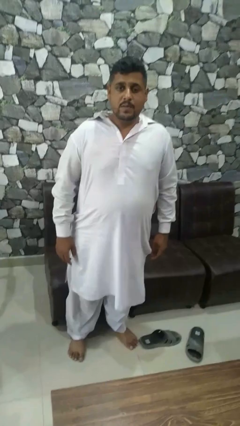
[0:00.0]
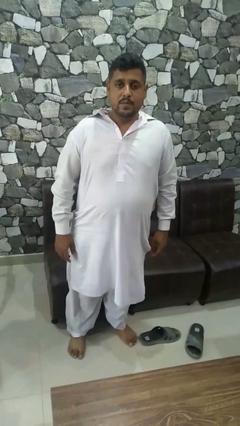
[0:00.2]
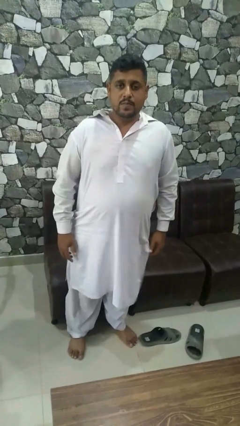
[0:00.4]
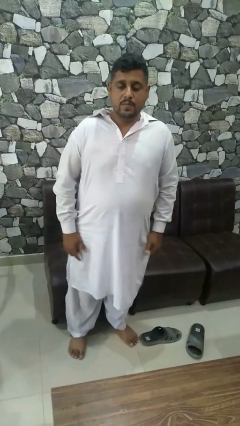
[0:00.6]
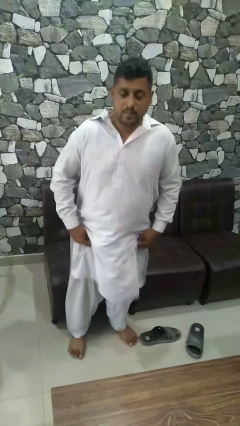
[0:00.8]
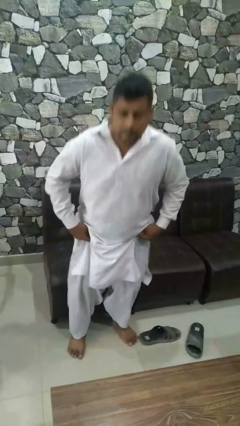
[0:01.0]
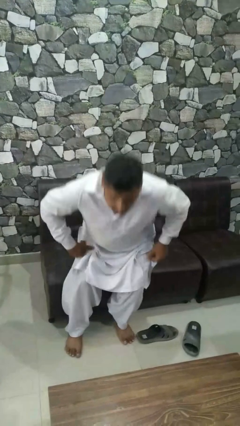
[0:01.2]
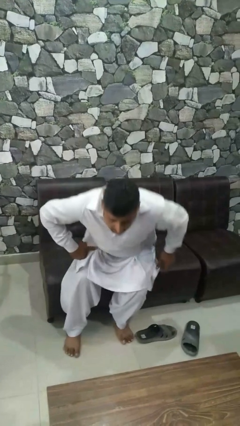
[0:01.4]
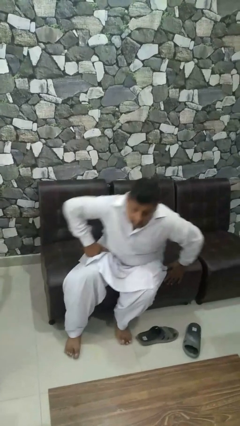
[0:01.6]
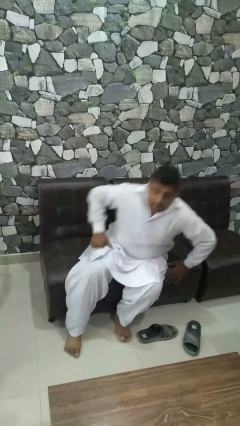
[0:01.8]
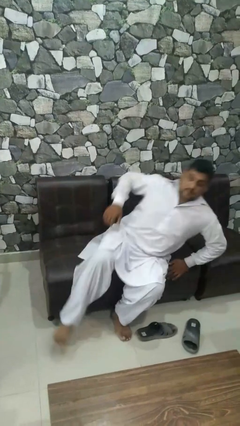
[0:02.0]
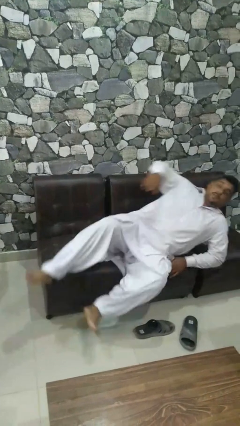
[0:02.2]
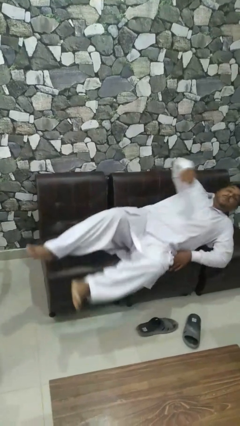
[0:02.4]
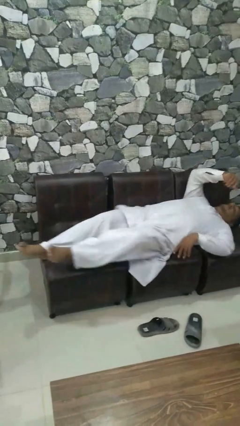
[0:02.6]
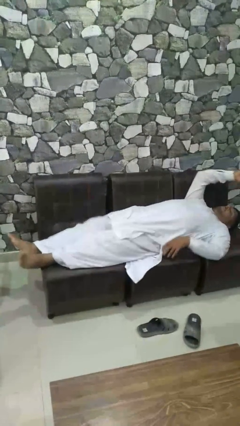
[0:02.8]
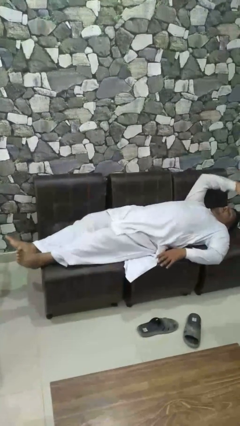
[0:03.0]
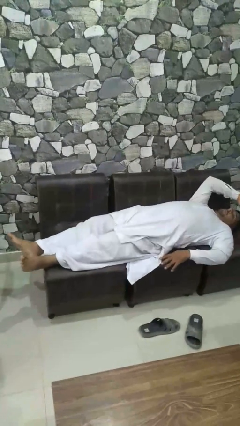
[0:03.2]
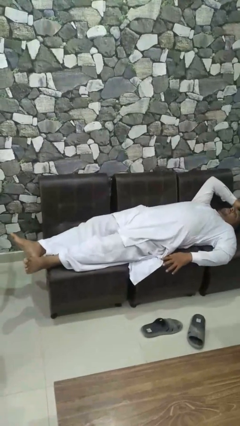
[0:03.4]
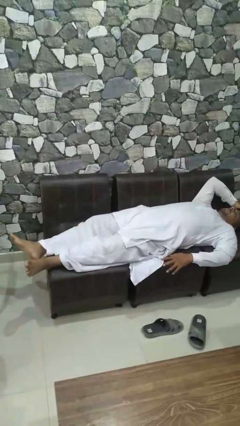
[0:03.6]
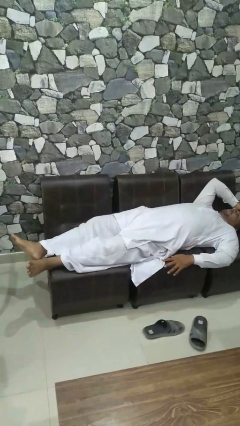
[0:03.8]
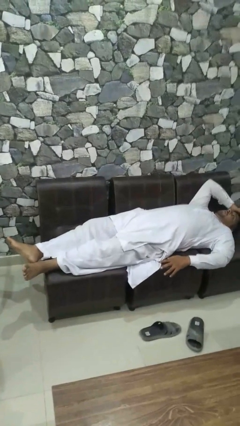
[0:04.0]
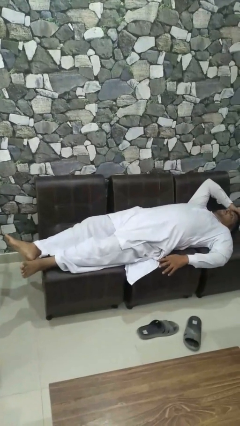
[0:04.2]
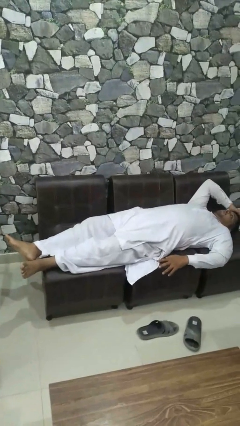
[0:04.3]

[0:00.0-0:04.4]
person lies down on couch

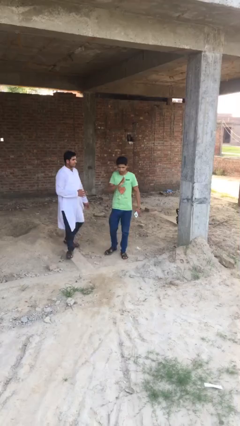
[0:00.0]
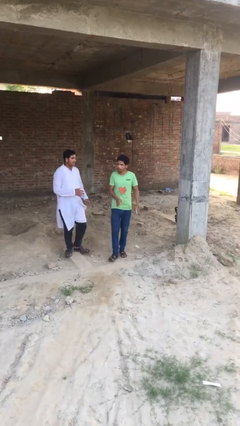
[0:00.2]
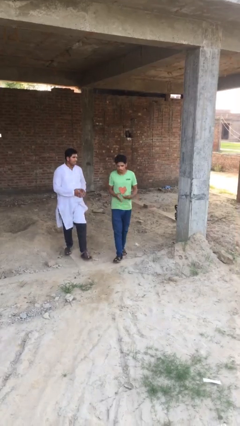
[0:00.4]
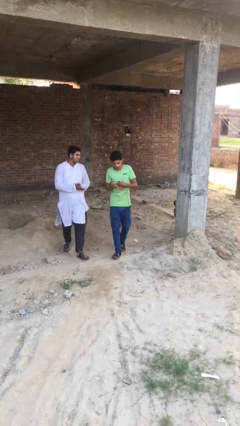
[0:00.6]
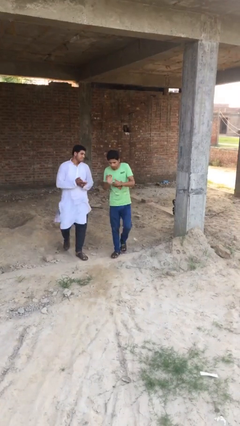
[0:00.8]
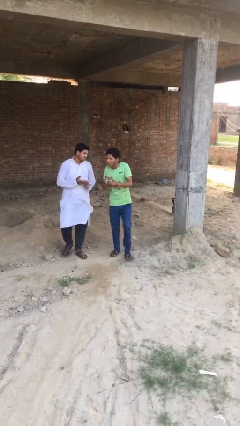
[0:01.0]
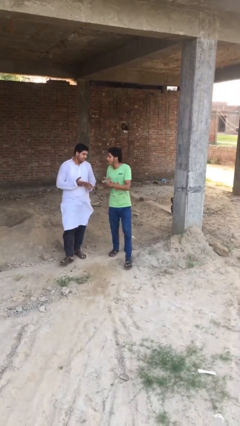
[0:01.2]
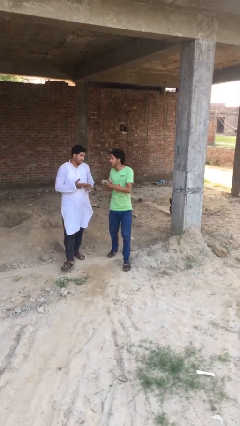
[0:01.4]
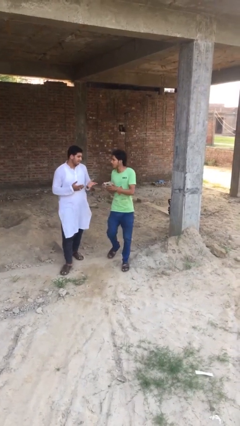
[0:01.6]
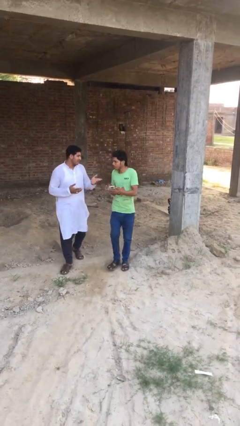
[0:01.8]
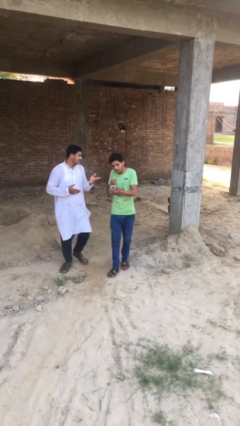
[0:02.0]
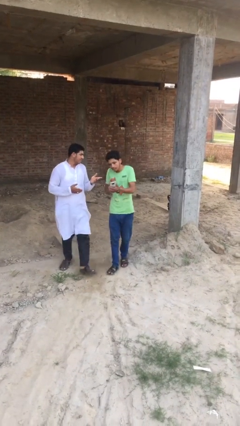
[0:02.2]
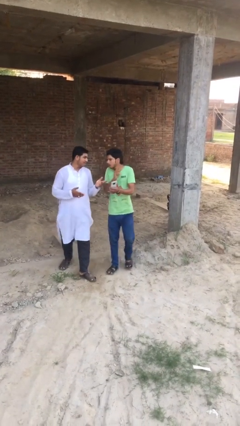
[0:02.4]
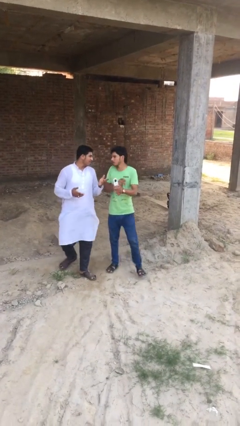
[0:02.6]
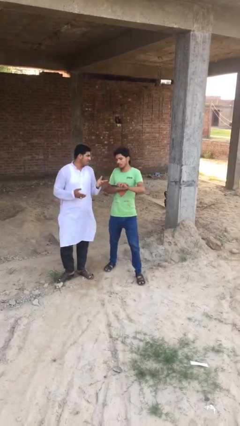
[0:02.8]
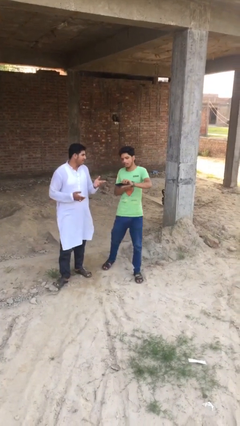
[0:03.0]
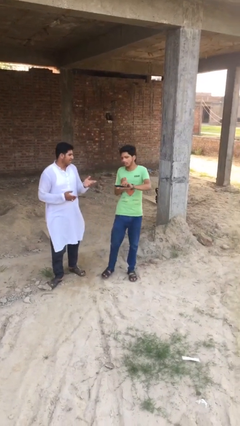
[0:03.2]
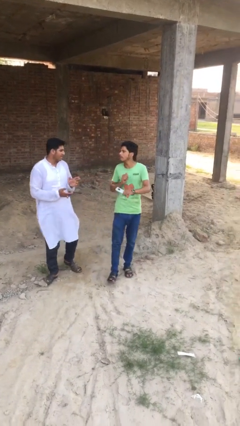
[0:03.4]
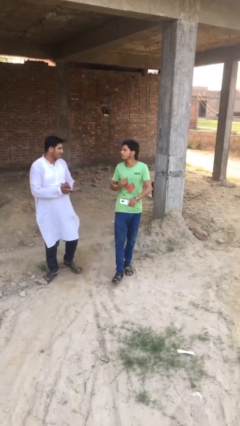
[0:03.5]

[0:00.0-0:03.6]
person talks to person

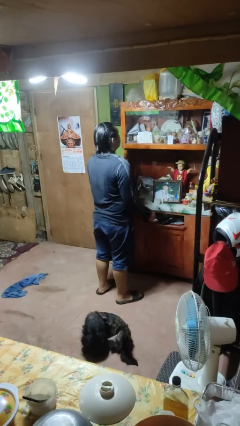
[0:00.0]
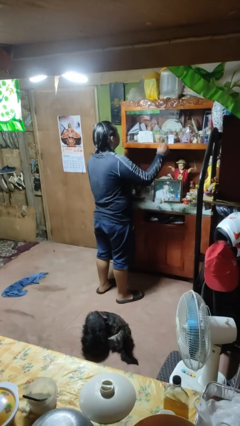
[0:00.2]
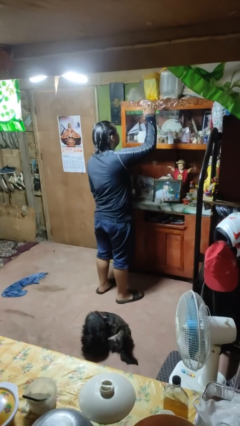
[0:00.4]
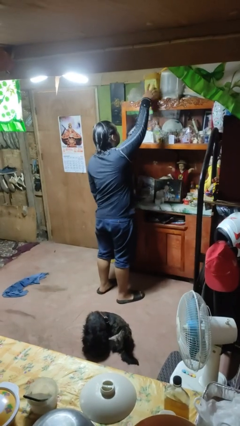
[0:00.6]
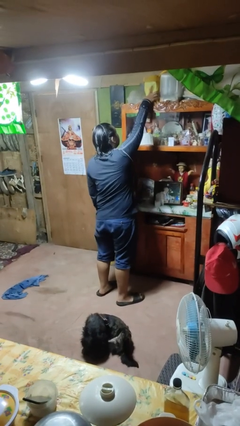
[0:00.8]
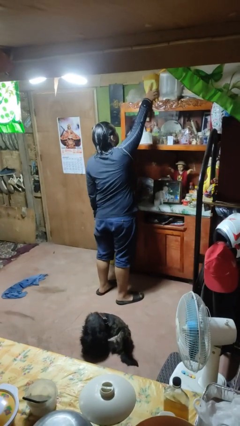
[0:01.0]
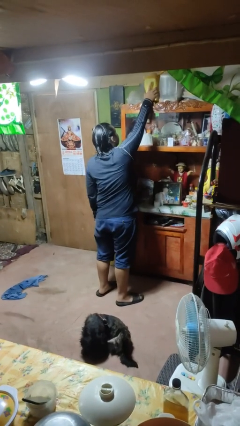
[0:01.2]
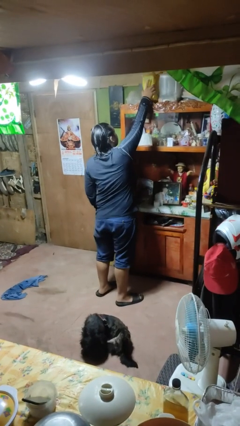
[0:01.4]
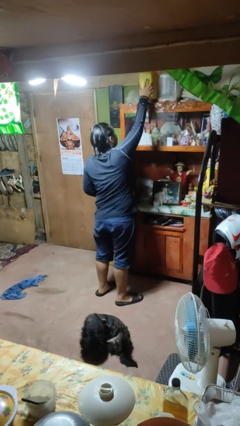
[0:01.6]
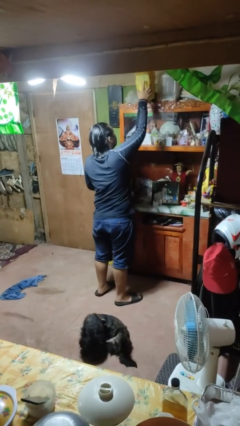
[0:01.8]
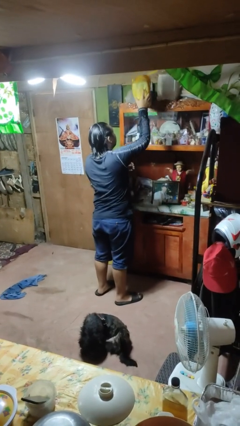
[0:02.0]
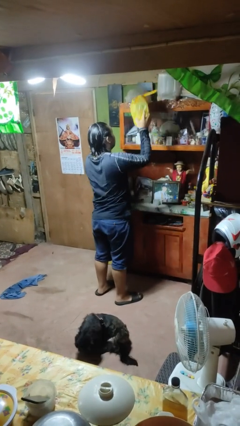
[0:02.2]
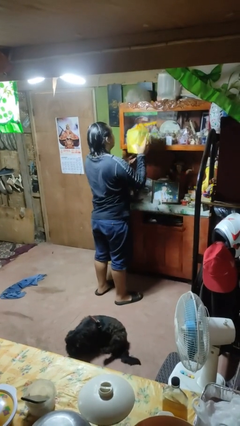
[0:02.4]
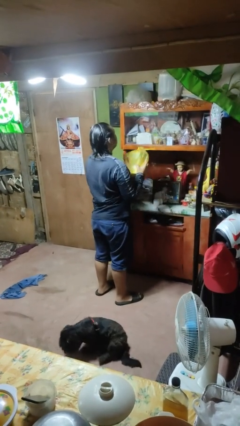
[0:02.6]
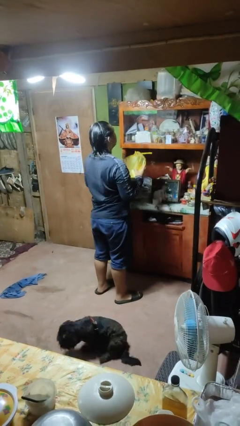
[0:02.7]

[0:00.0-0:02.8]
person picks up object from shelf

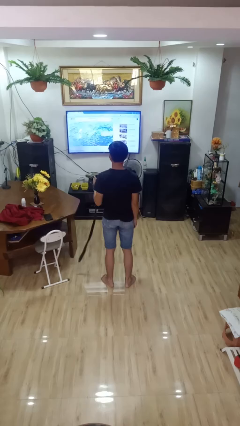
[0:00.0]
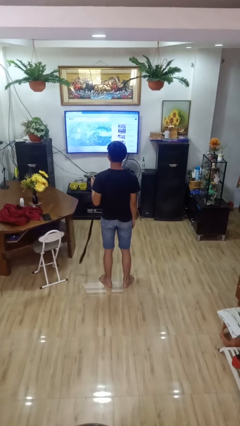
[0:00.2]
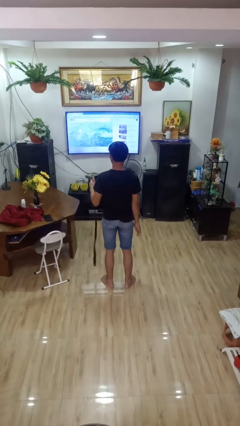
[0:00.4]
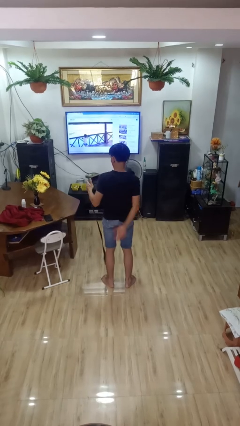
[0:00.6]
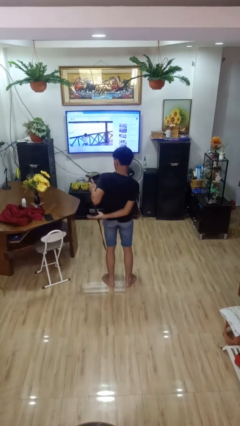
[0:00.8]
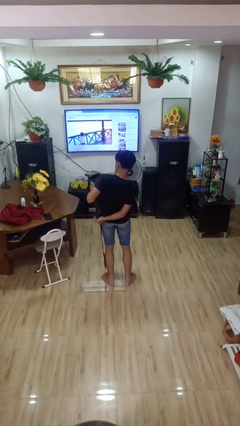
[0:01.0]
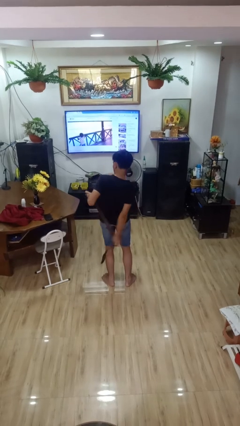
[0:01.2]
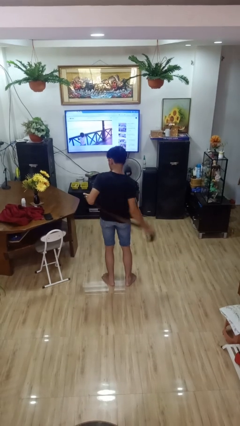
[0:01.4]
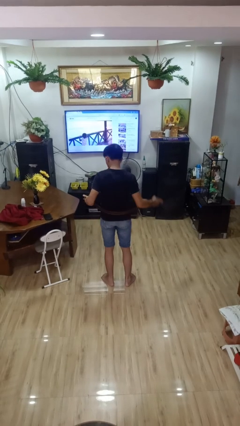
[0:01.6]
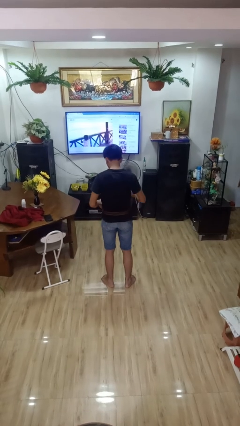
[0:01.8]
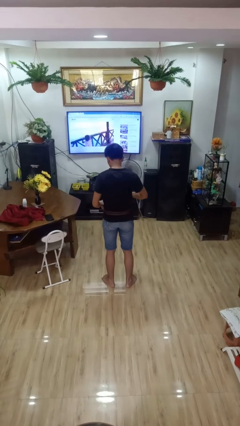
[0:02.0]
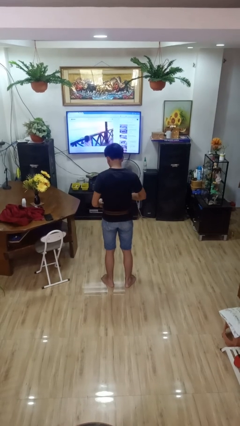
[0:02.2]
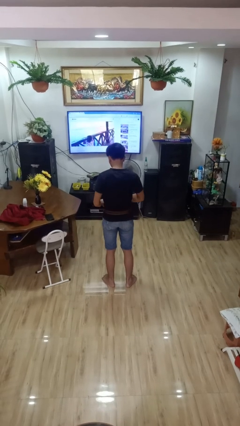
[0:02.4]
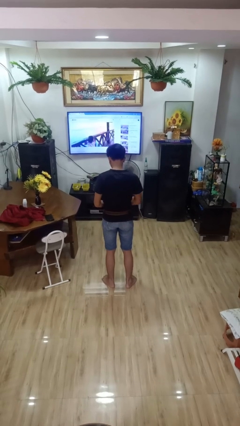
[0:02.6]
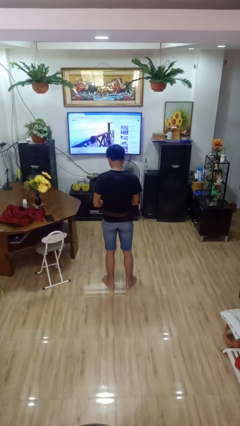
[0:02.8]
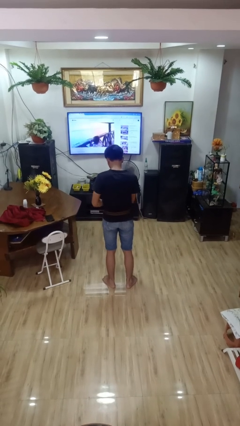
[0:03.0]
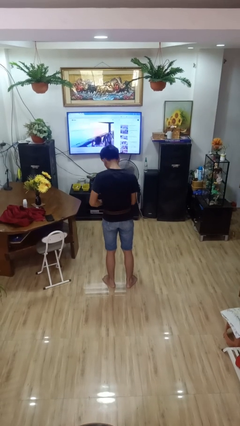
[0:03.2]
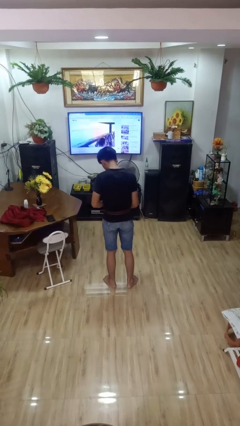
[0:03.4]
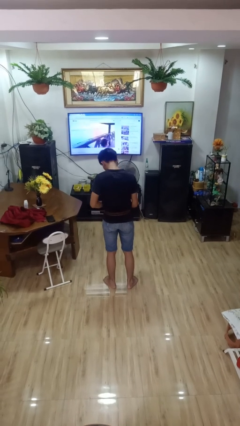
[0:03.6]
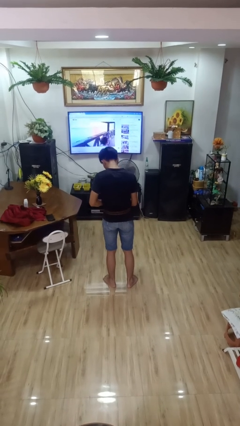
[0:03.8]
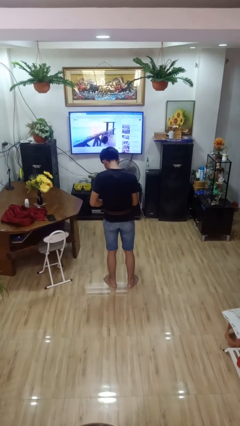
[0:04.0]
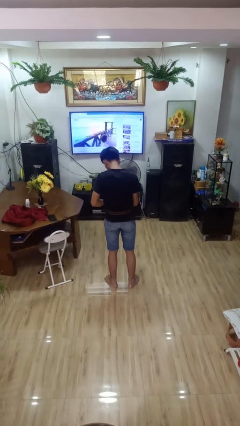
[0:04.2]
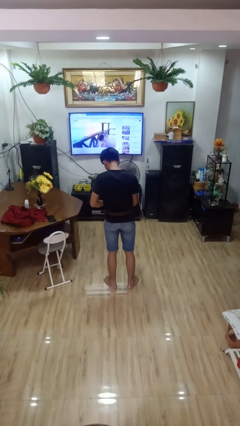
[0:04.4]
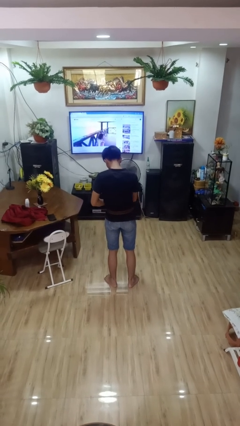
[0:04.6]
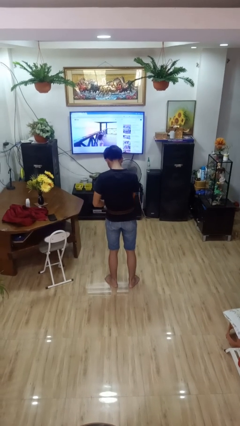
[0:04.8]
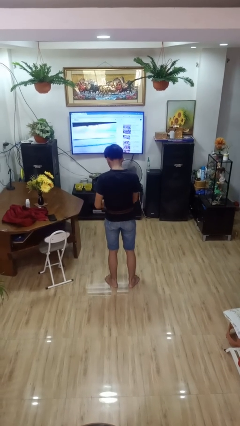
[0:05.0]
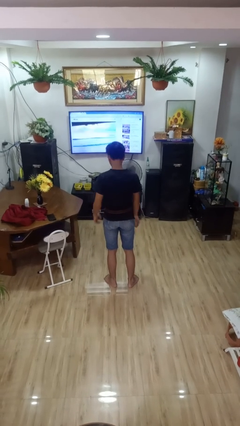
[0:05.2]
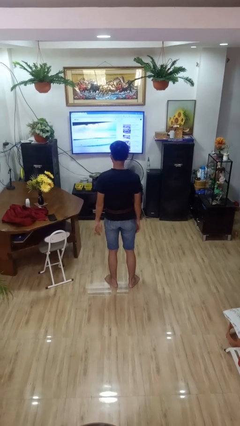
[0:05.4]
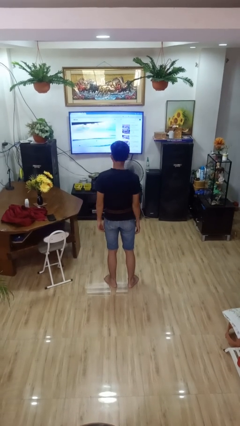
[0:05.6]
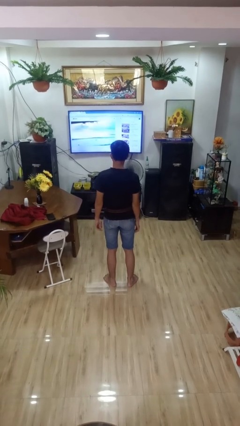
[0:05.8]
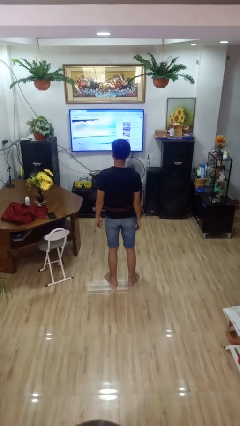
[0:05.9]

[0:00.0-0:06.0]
person puts on belt

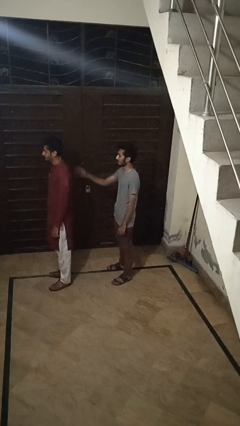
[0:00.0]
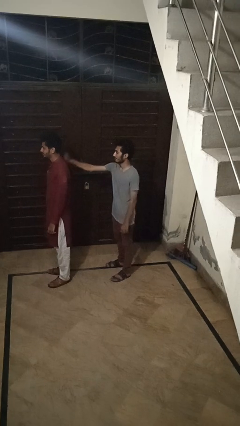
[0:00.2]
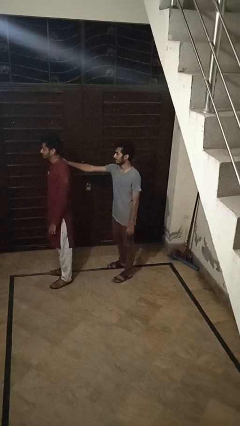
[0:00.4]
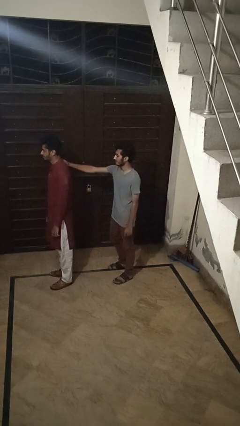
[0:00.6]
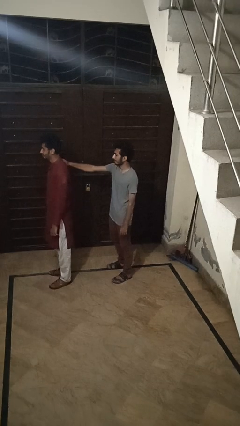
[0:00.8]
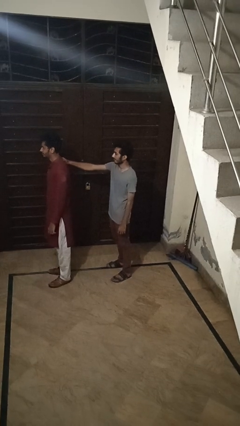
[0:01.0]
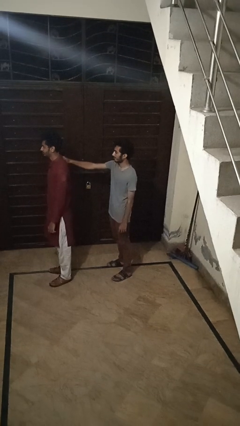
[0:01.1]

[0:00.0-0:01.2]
person grabs person by shoulder
